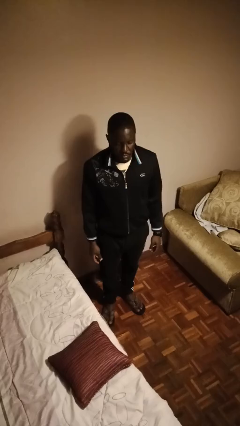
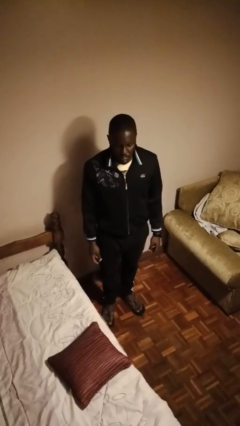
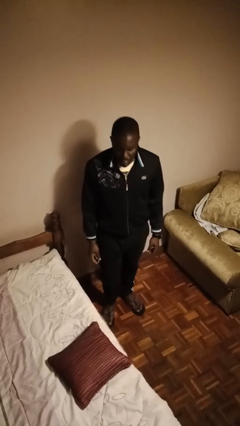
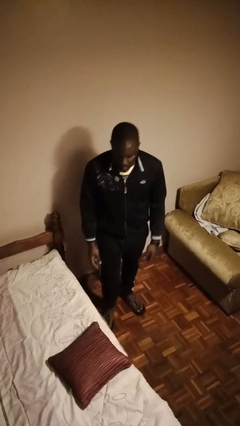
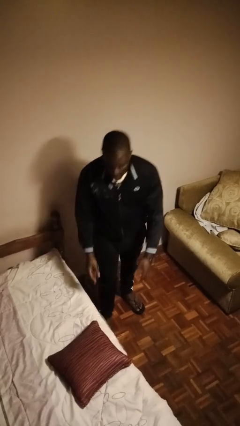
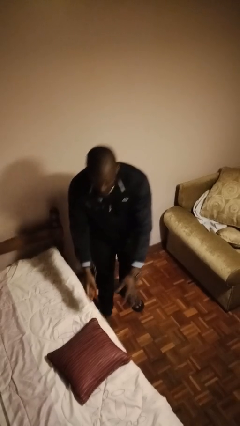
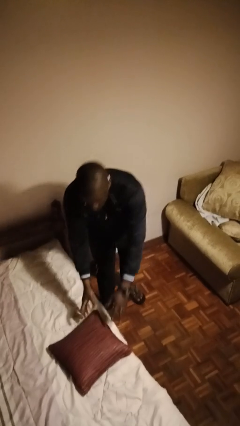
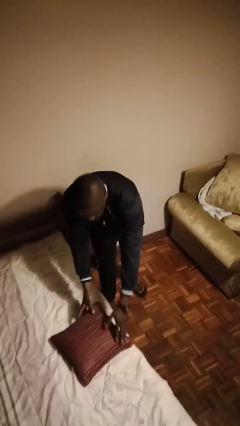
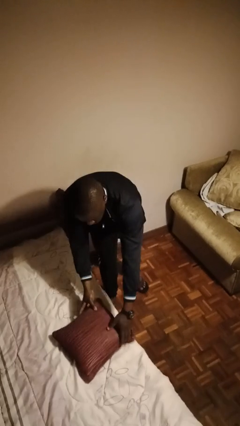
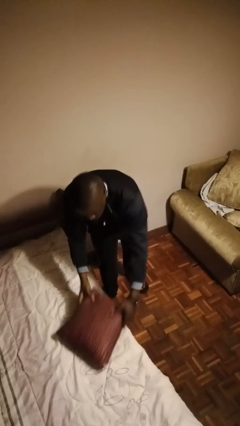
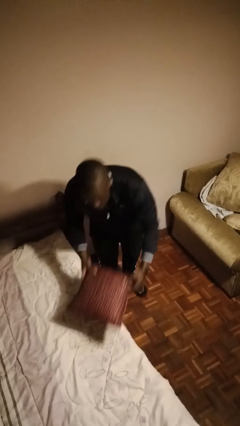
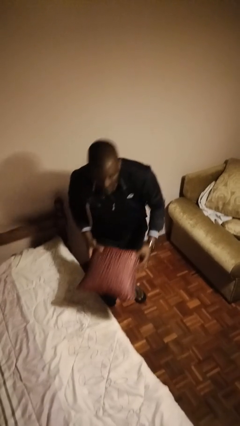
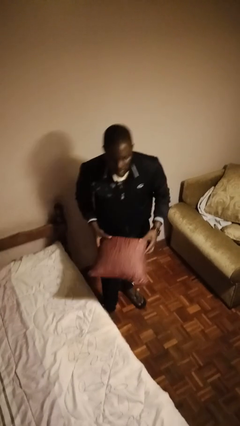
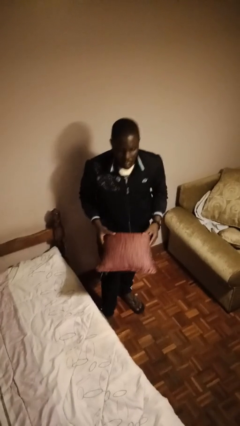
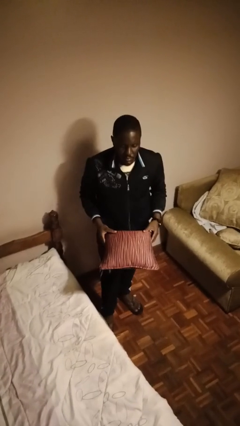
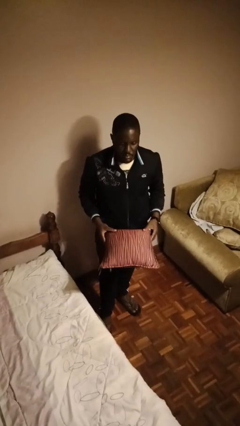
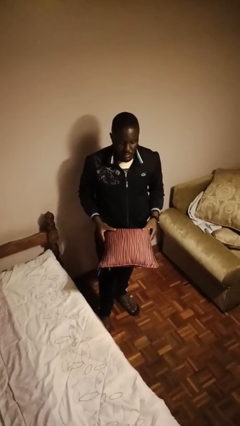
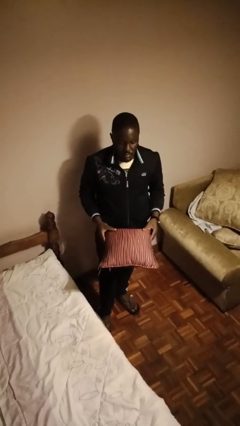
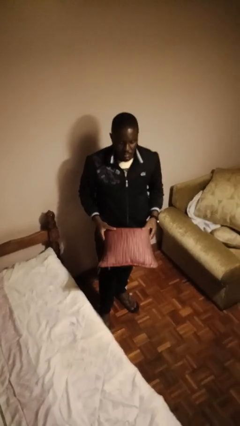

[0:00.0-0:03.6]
person picks up object from bed

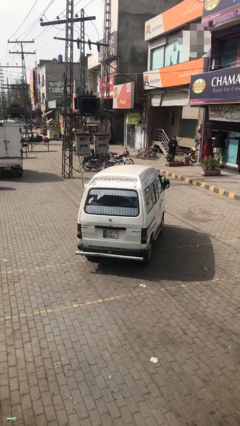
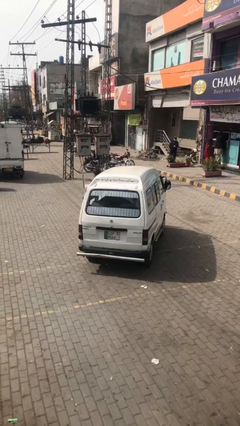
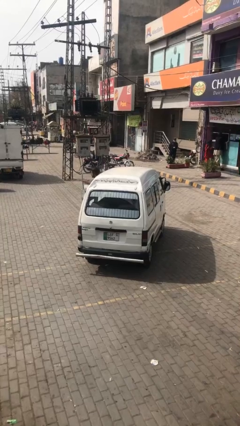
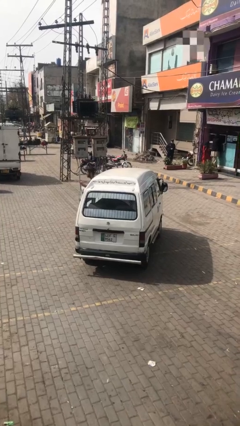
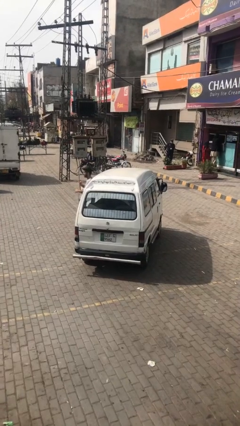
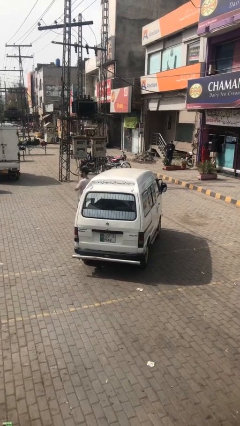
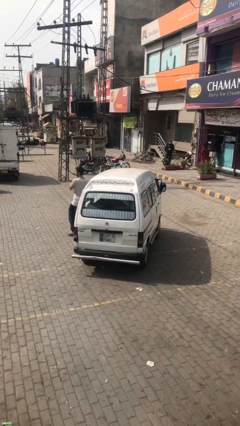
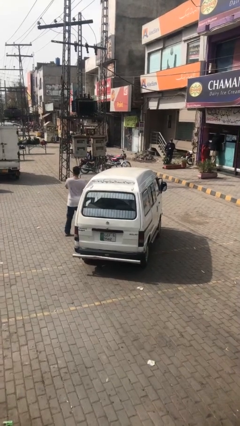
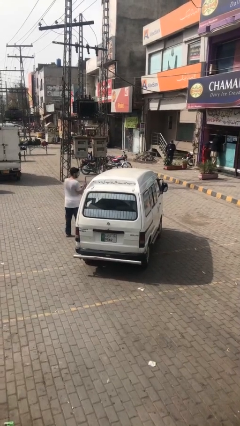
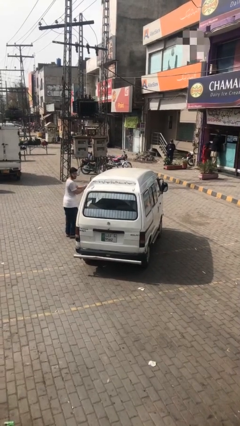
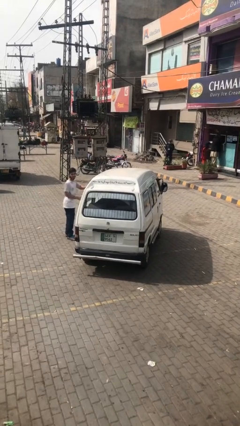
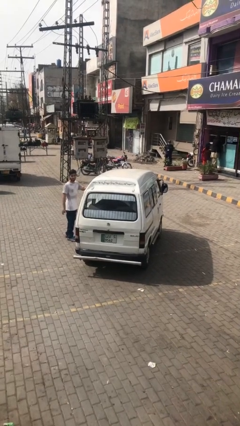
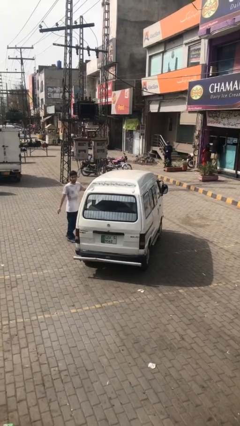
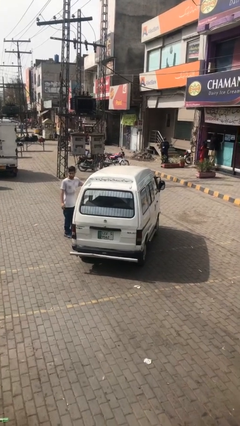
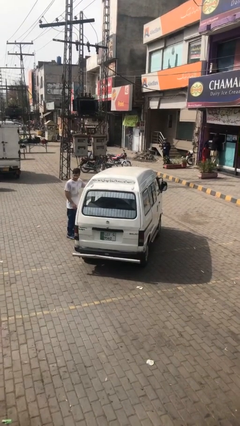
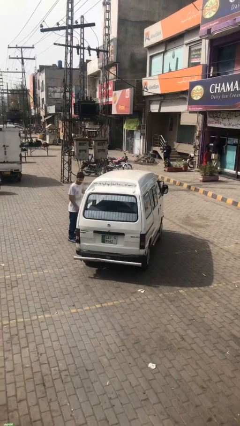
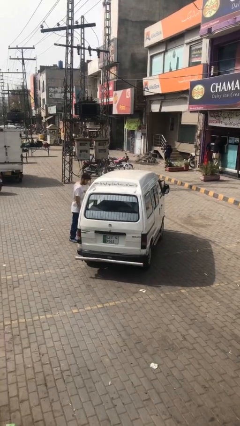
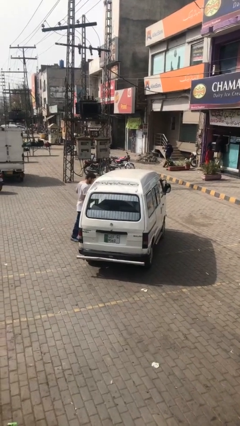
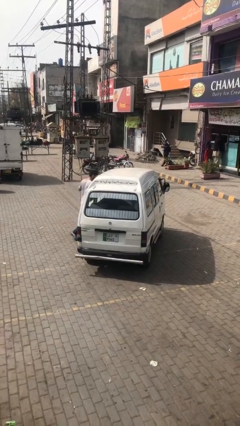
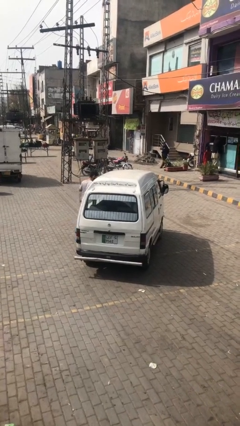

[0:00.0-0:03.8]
car drops off person

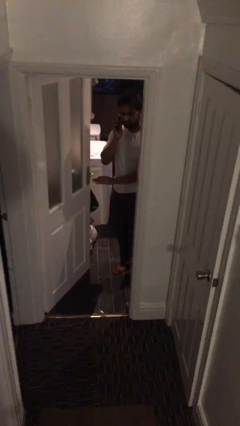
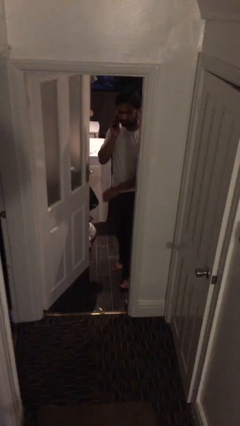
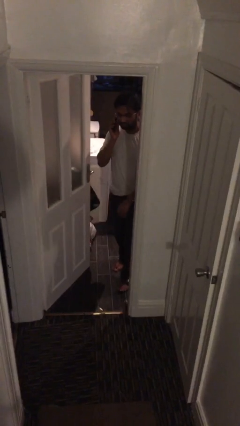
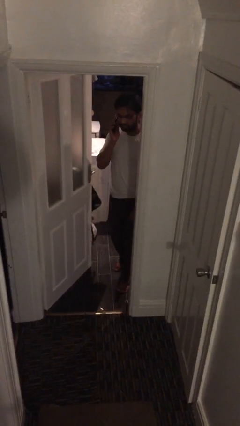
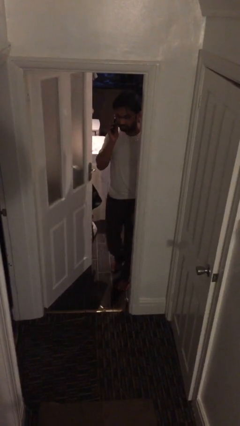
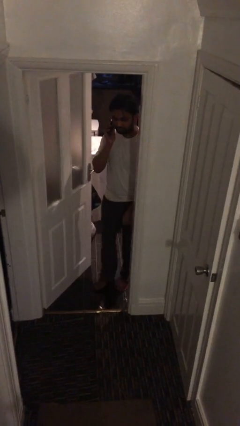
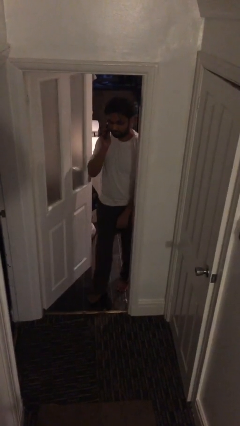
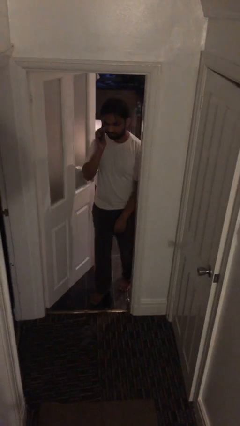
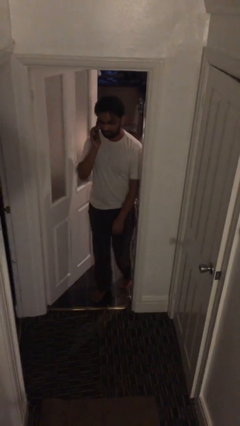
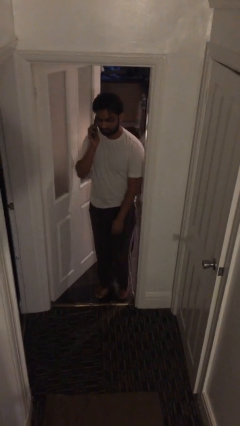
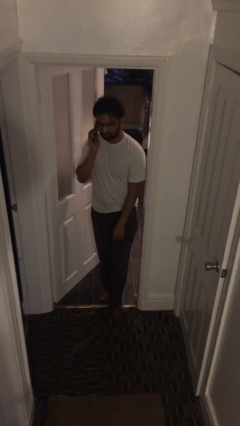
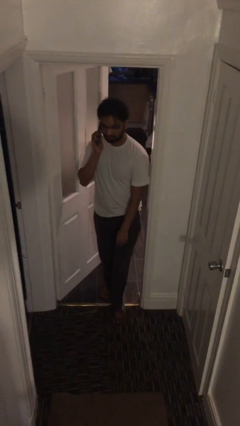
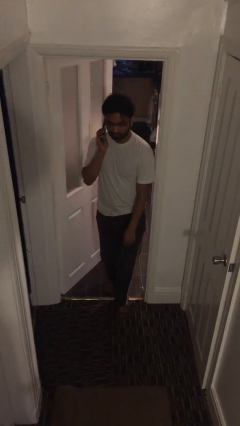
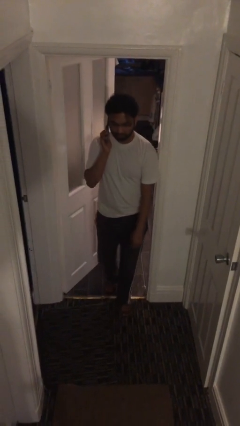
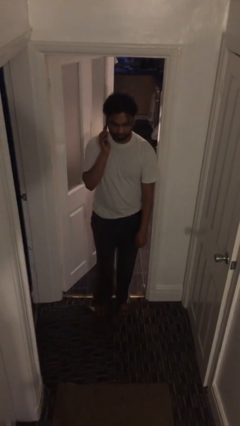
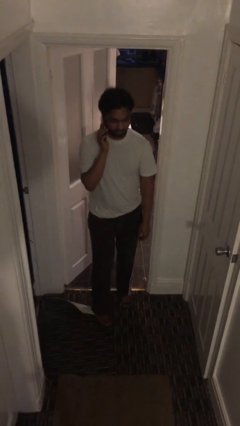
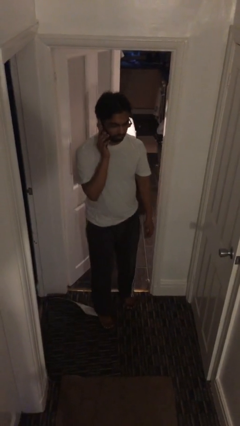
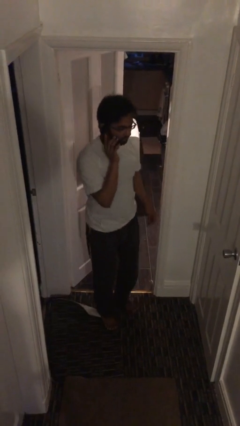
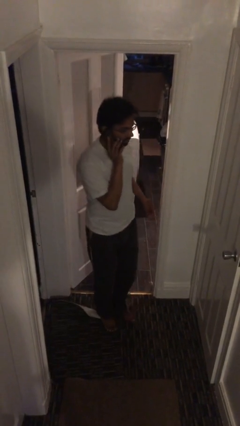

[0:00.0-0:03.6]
person enters scene through structure

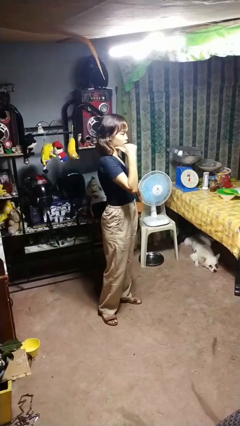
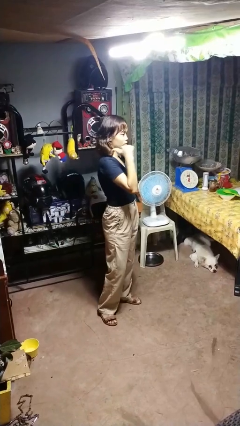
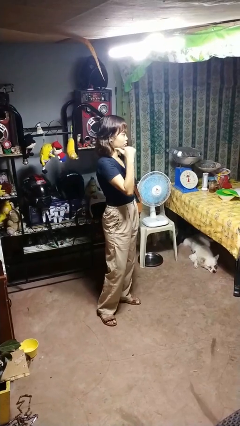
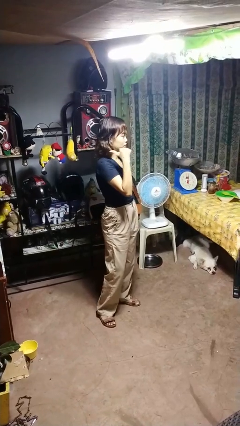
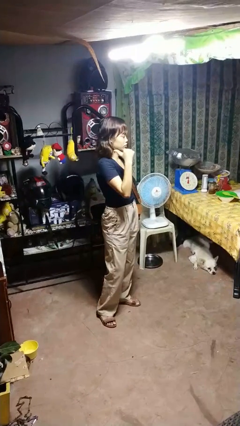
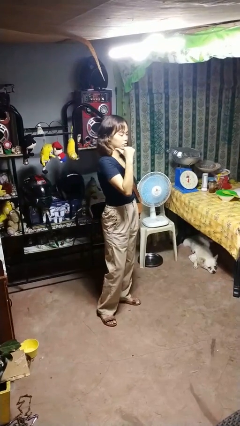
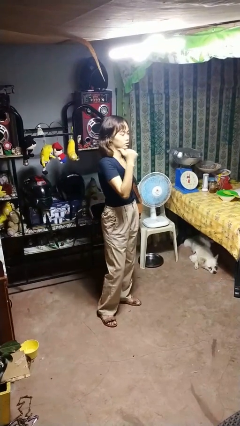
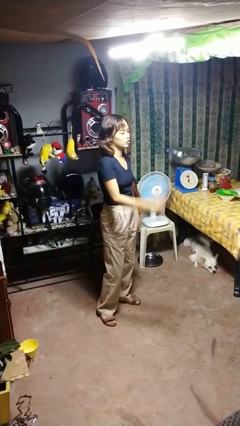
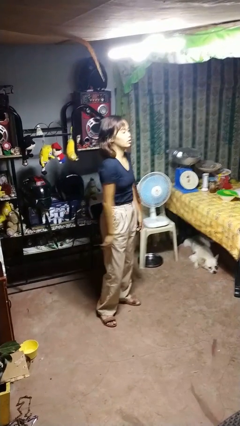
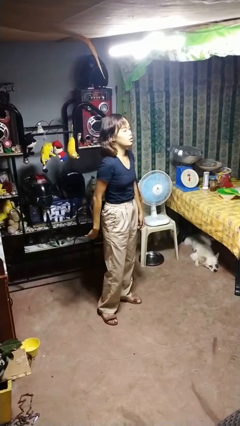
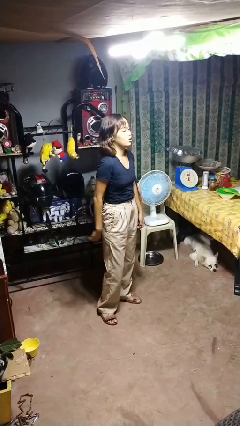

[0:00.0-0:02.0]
person gestures behind me

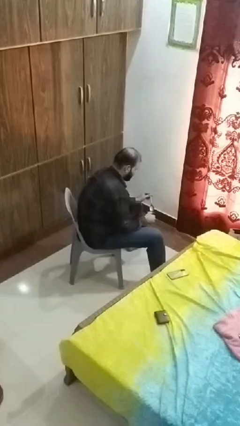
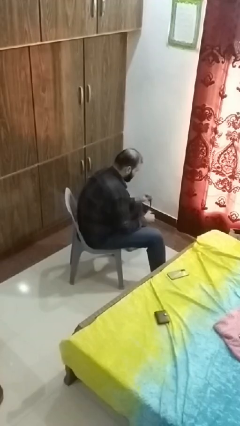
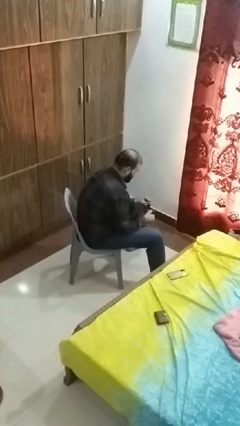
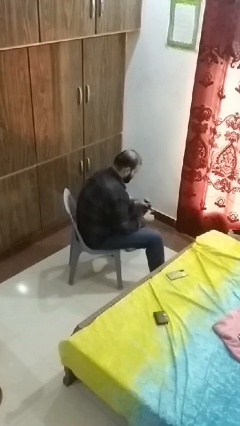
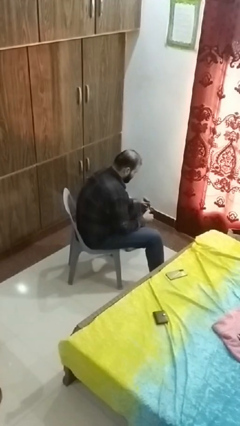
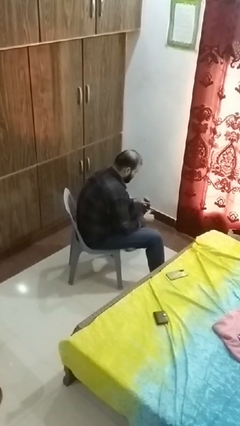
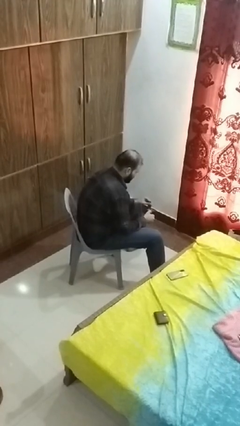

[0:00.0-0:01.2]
person stirs mug

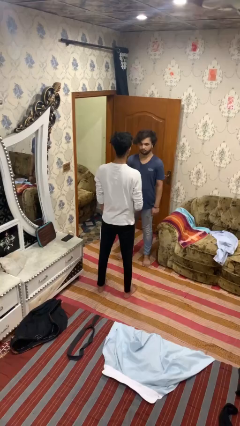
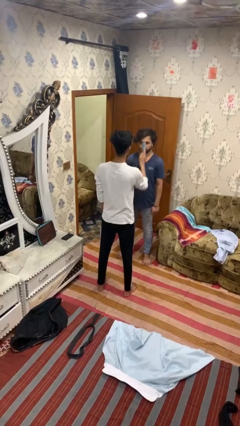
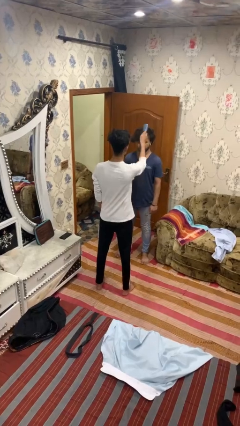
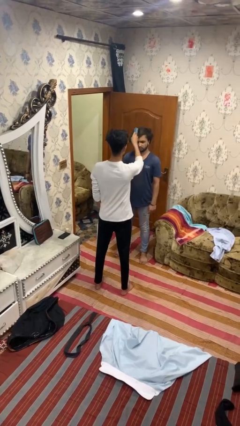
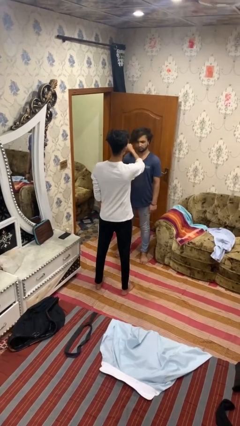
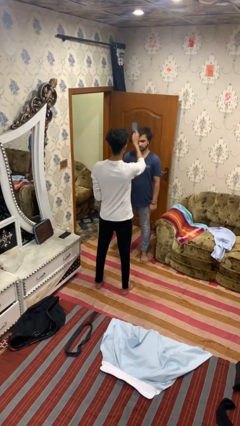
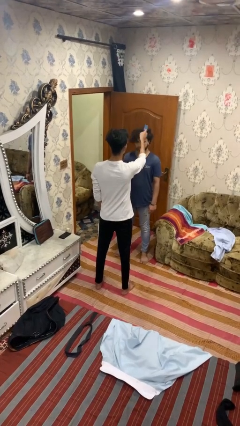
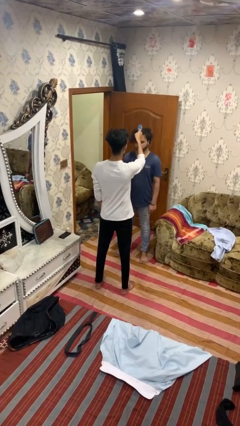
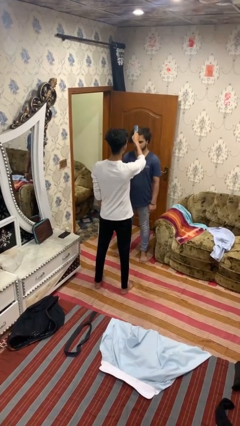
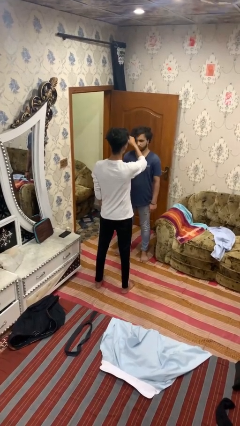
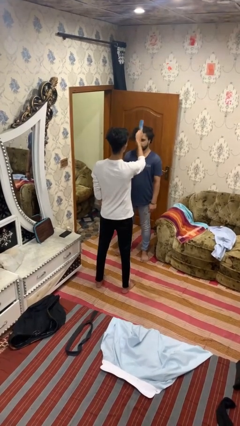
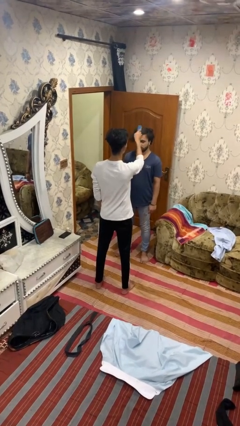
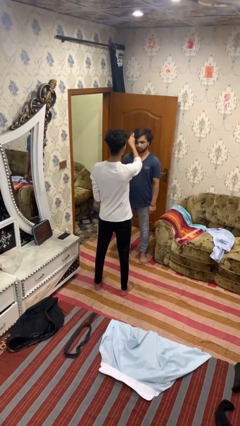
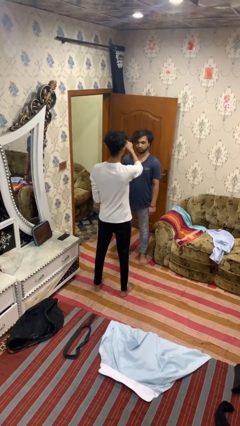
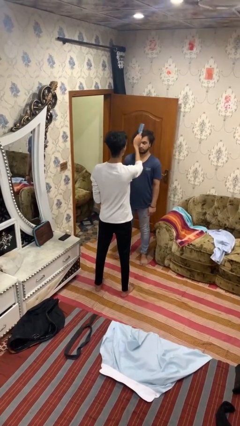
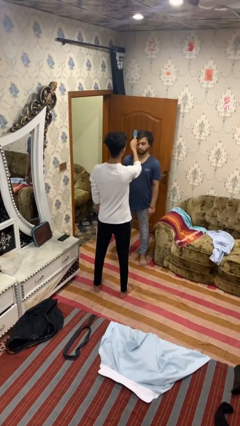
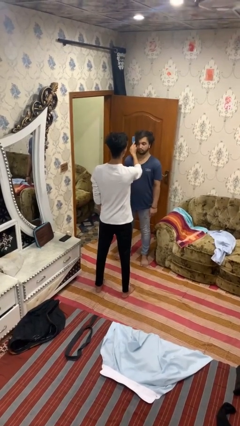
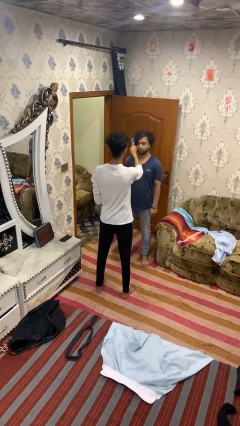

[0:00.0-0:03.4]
person brushes hair of person
